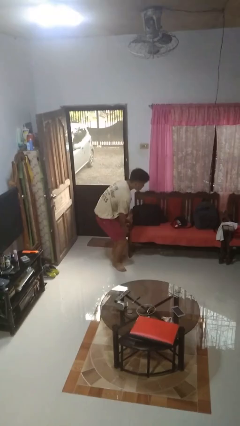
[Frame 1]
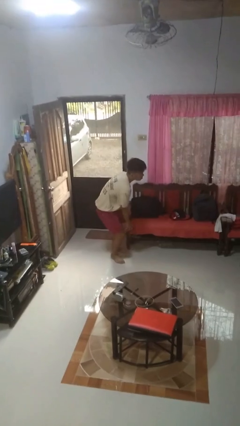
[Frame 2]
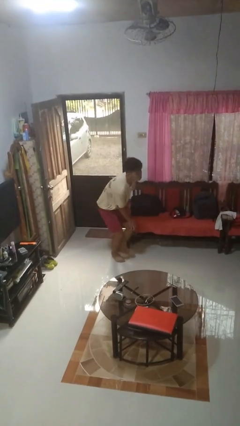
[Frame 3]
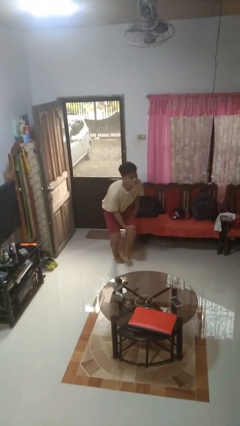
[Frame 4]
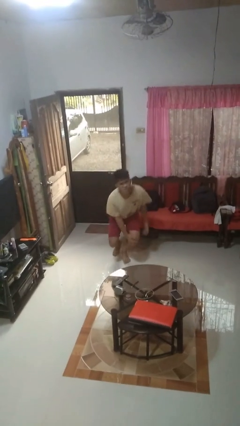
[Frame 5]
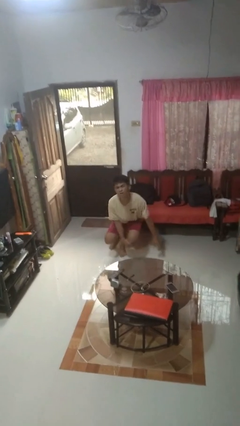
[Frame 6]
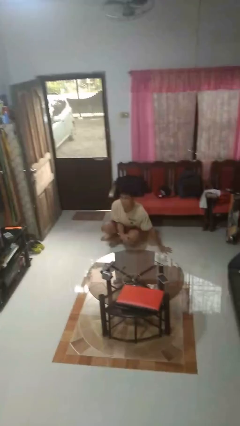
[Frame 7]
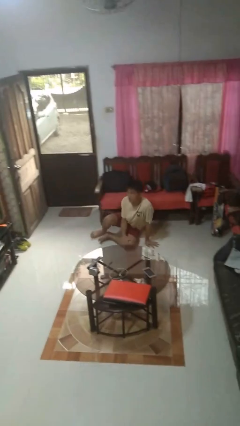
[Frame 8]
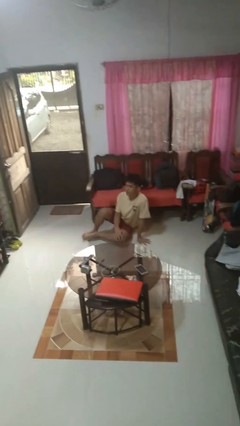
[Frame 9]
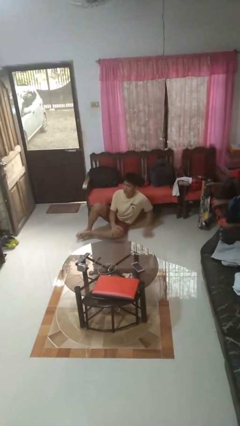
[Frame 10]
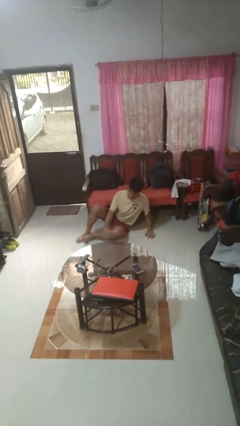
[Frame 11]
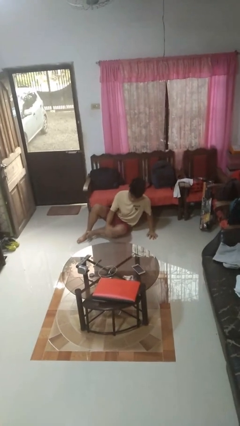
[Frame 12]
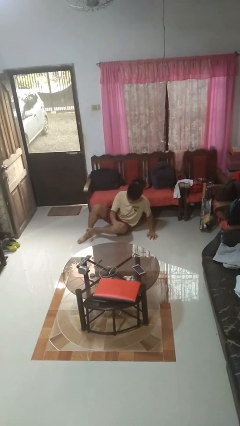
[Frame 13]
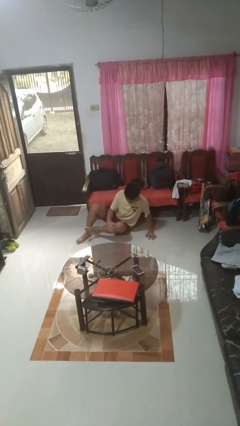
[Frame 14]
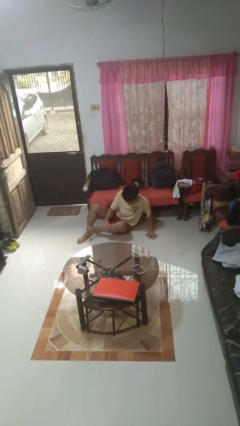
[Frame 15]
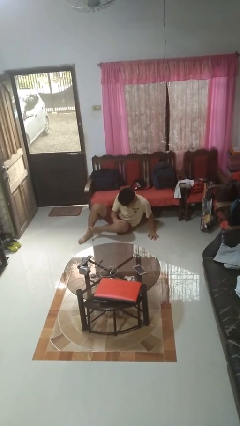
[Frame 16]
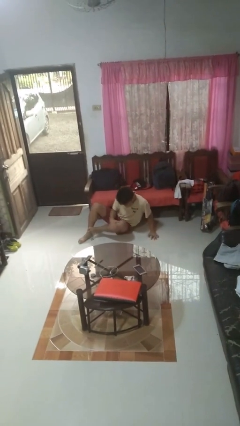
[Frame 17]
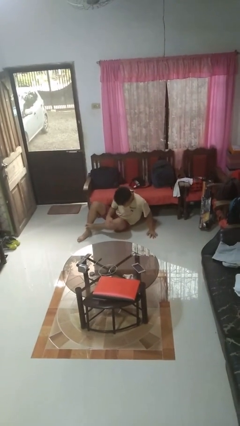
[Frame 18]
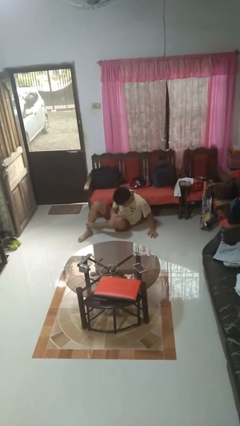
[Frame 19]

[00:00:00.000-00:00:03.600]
person lies down on floor

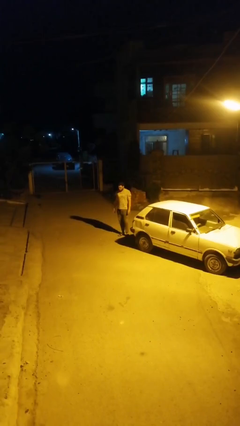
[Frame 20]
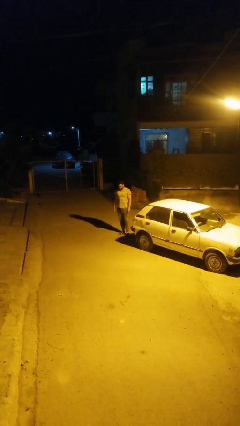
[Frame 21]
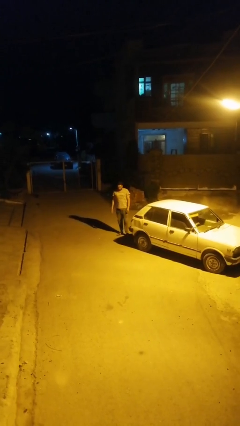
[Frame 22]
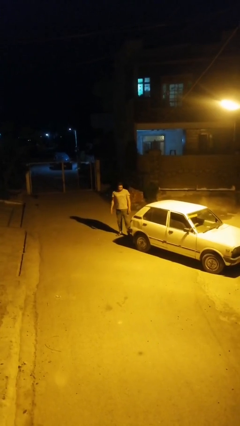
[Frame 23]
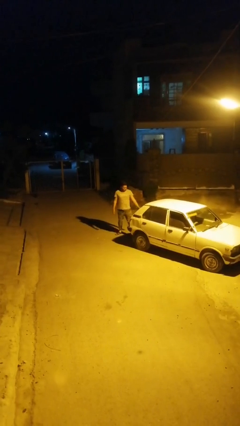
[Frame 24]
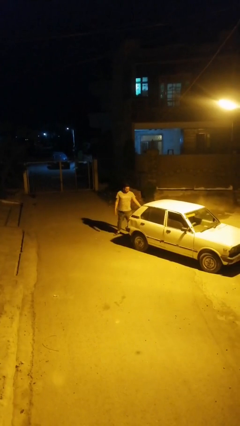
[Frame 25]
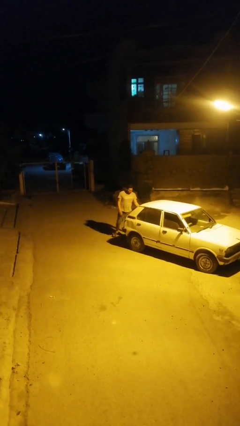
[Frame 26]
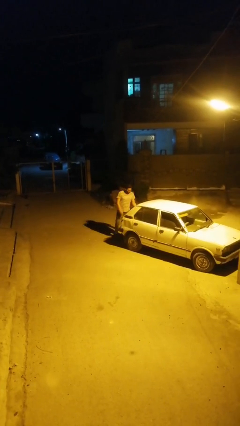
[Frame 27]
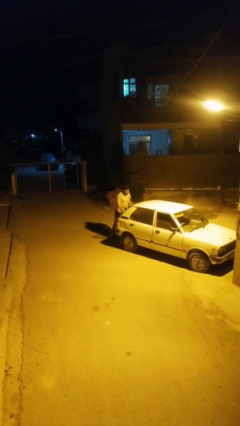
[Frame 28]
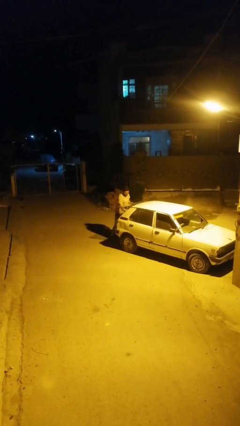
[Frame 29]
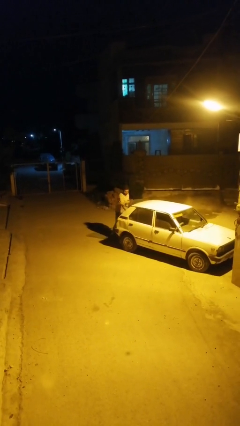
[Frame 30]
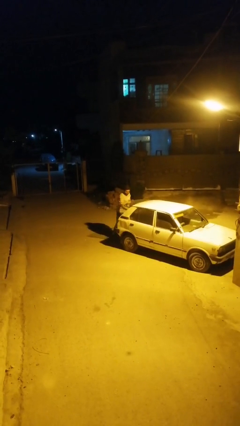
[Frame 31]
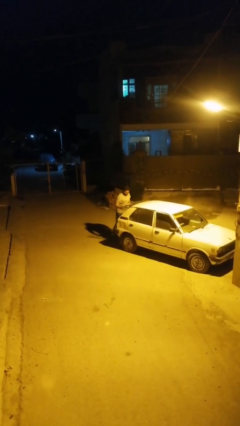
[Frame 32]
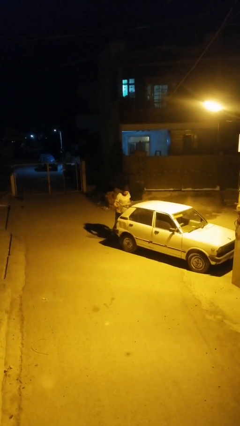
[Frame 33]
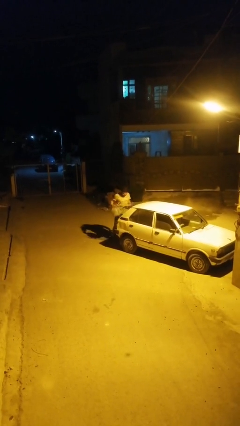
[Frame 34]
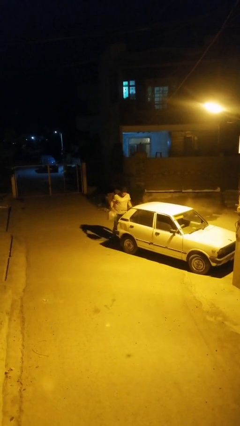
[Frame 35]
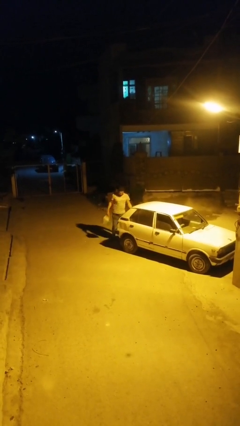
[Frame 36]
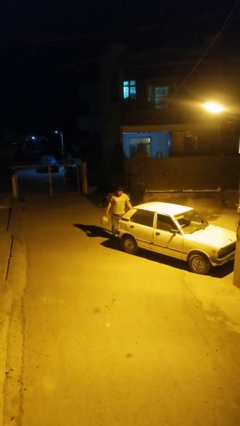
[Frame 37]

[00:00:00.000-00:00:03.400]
person loads car

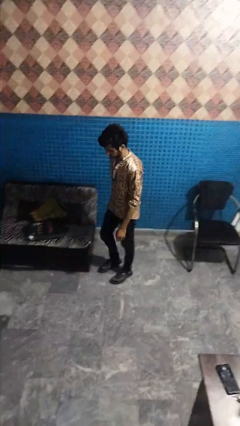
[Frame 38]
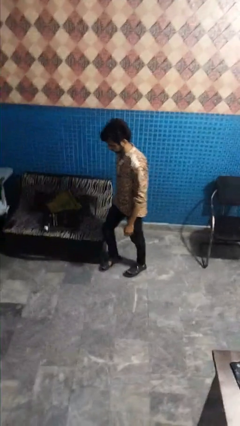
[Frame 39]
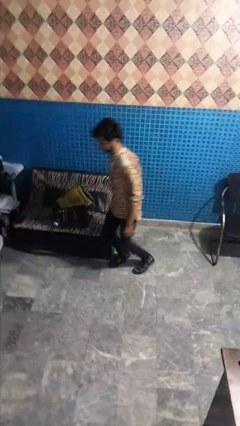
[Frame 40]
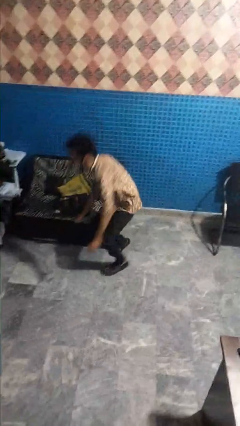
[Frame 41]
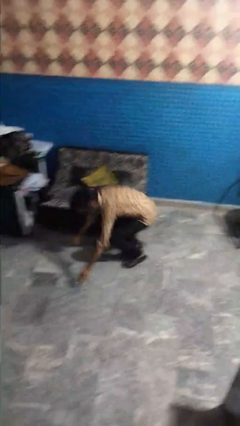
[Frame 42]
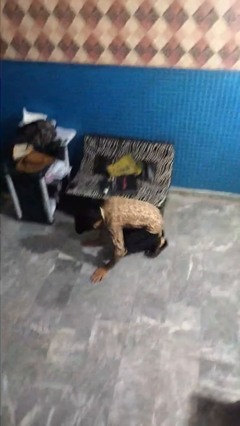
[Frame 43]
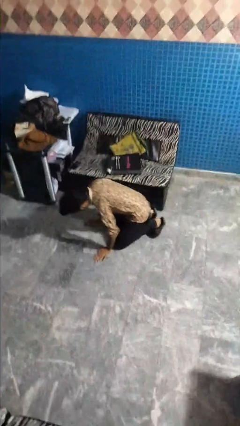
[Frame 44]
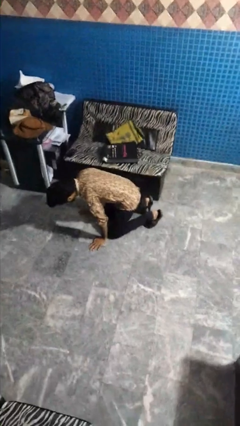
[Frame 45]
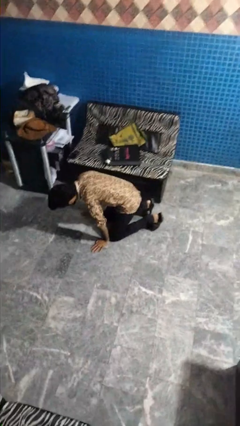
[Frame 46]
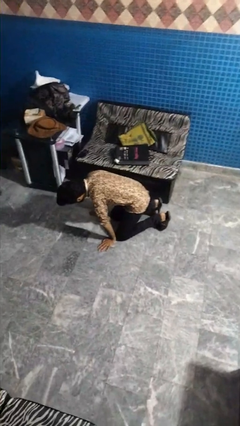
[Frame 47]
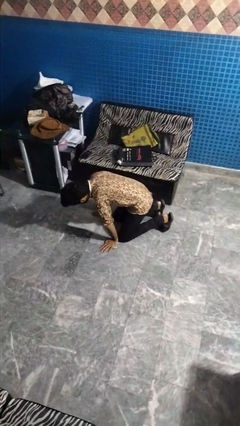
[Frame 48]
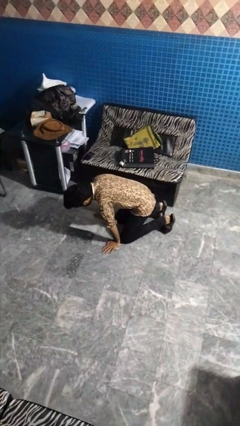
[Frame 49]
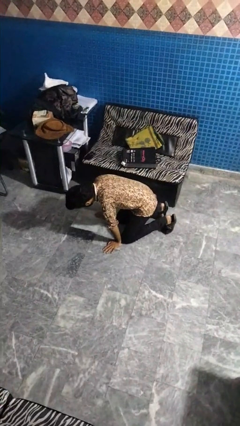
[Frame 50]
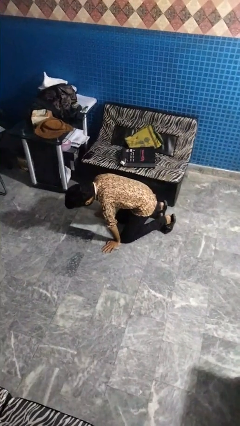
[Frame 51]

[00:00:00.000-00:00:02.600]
person trips on object on floor

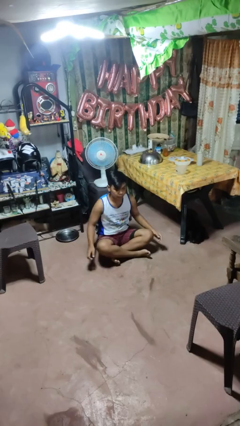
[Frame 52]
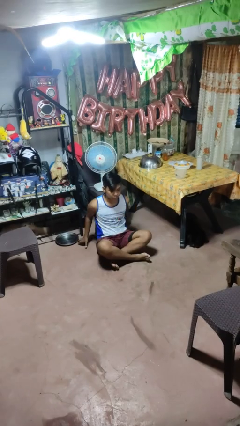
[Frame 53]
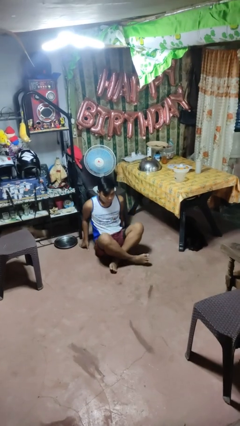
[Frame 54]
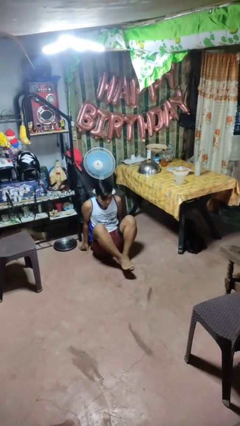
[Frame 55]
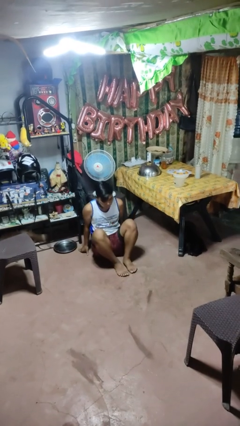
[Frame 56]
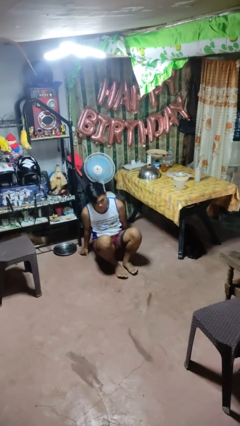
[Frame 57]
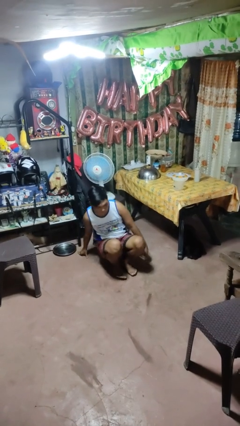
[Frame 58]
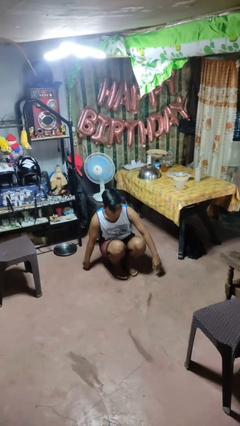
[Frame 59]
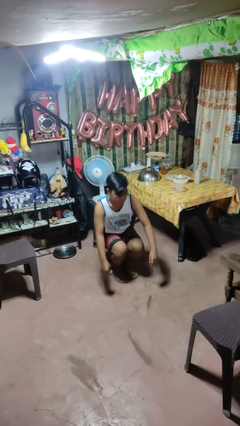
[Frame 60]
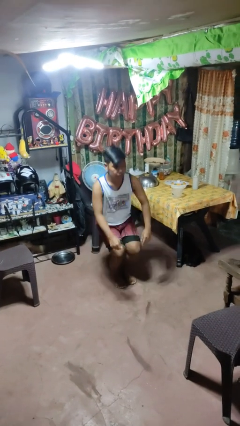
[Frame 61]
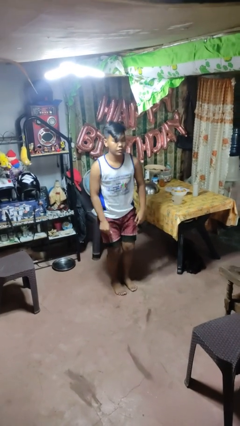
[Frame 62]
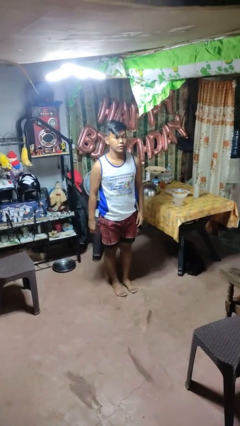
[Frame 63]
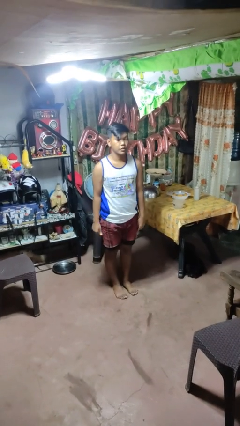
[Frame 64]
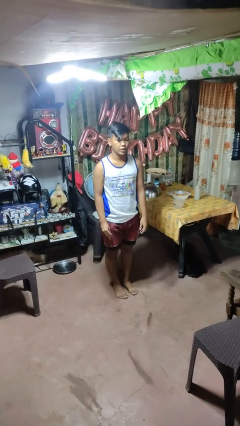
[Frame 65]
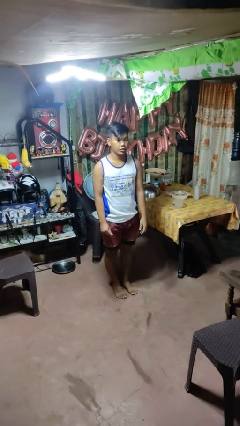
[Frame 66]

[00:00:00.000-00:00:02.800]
person stands up from floor

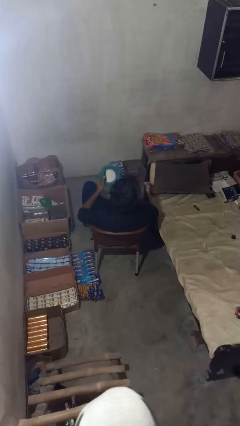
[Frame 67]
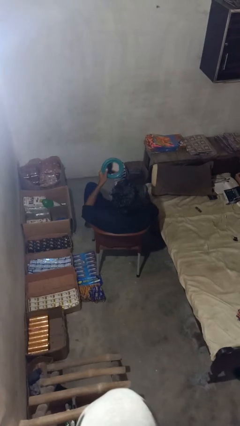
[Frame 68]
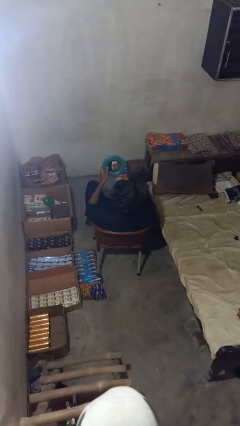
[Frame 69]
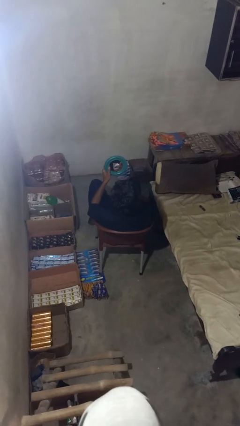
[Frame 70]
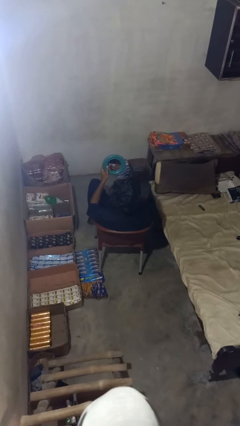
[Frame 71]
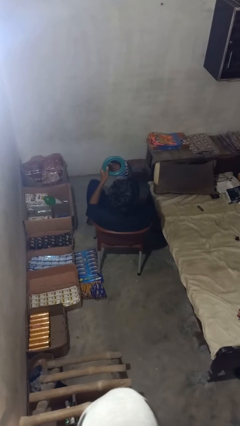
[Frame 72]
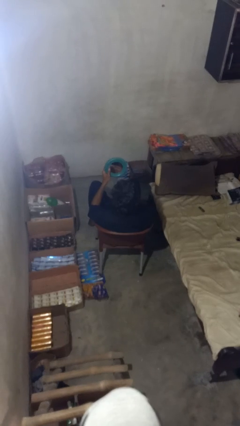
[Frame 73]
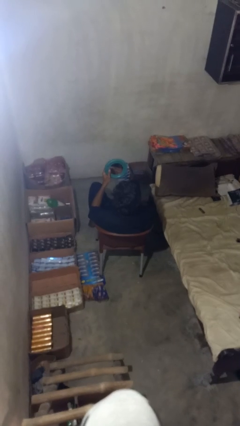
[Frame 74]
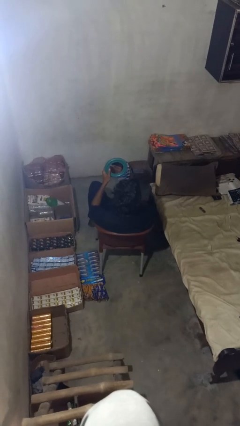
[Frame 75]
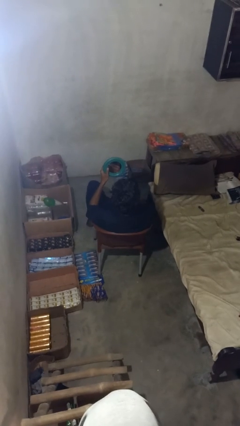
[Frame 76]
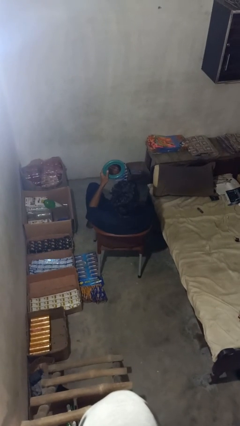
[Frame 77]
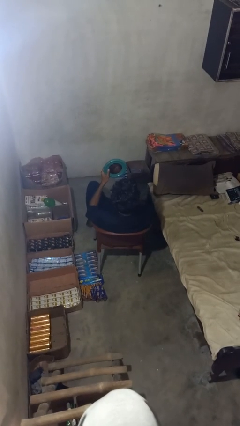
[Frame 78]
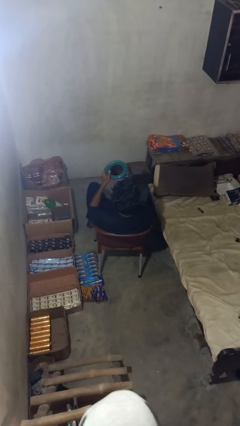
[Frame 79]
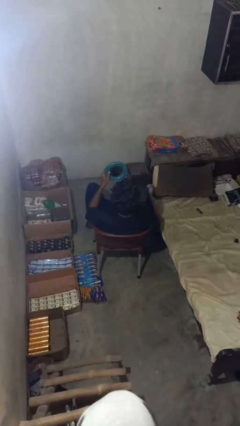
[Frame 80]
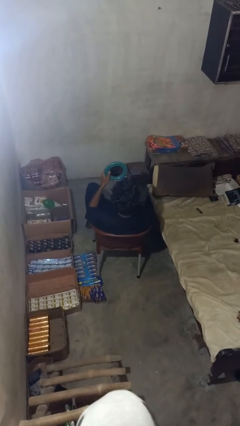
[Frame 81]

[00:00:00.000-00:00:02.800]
person applies foundation makeup

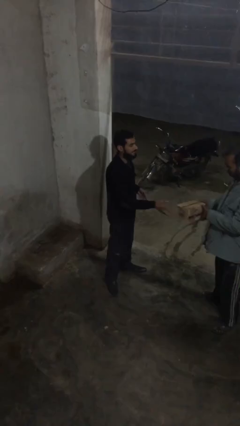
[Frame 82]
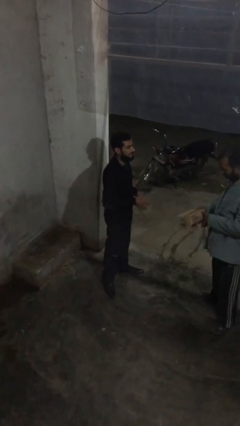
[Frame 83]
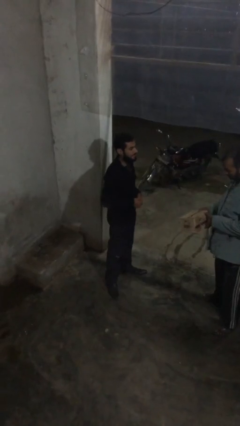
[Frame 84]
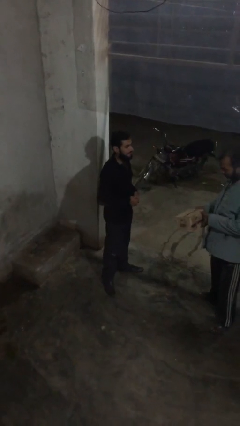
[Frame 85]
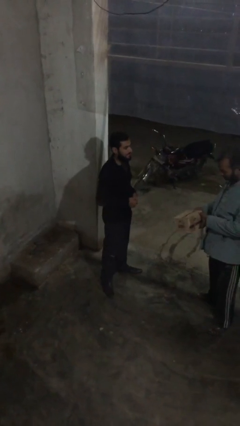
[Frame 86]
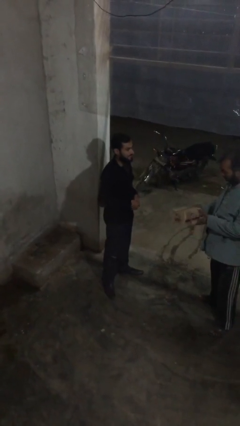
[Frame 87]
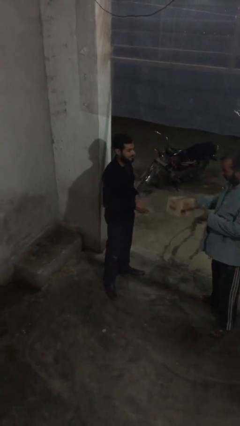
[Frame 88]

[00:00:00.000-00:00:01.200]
person transfers object to person

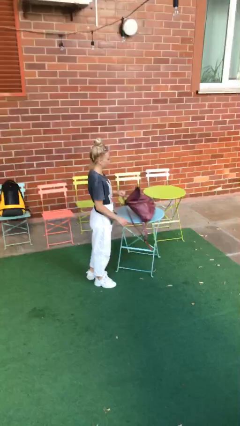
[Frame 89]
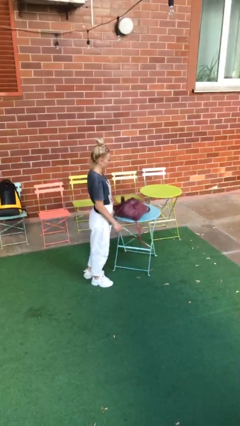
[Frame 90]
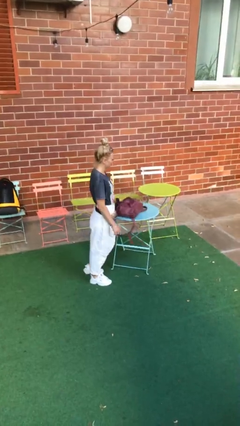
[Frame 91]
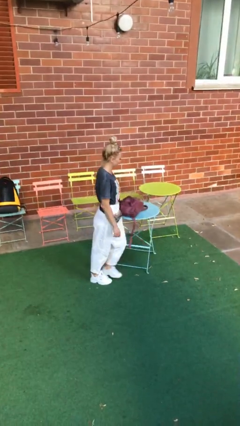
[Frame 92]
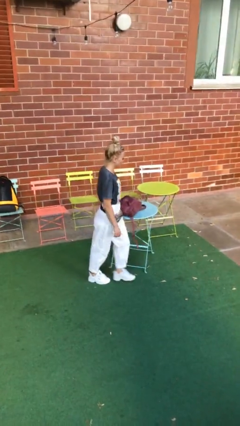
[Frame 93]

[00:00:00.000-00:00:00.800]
person puts down object on table
